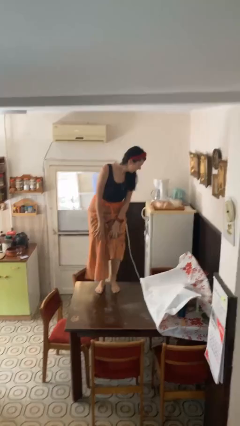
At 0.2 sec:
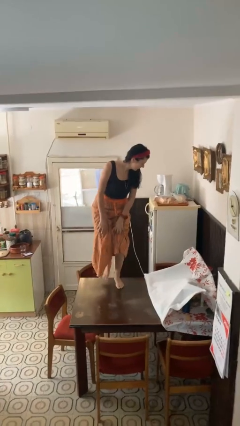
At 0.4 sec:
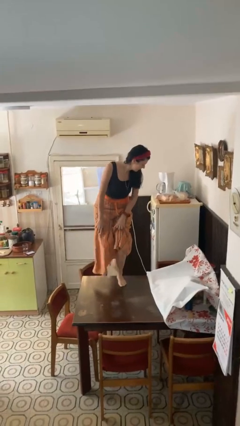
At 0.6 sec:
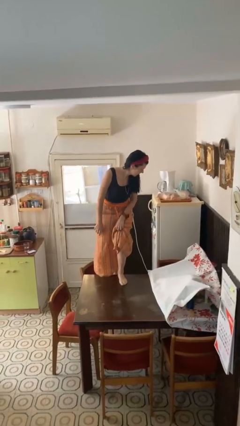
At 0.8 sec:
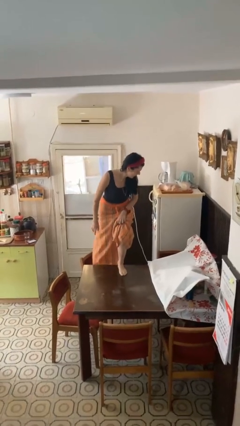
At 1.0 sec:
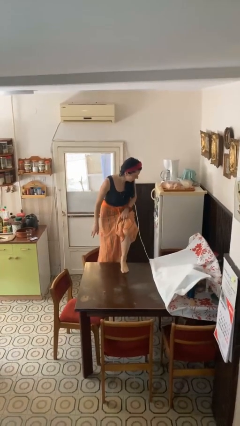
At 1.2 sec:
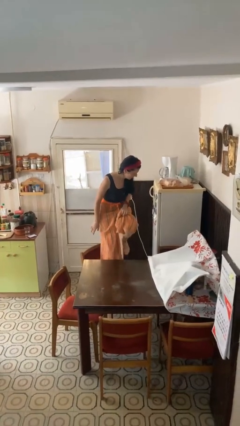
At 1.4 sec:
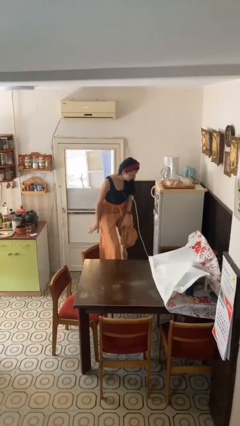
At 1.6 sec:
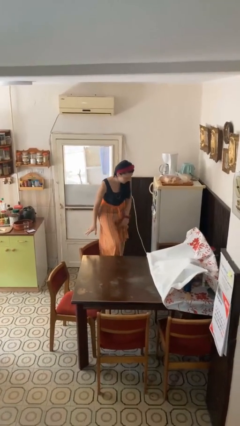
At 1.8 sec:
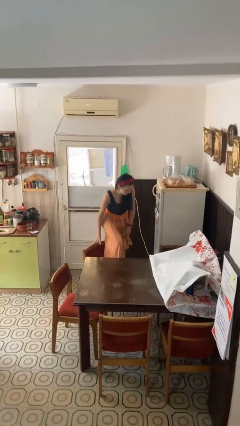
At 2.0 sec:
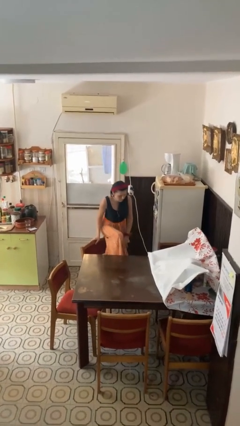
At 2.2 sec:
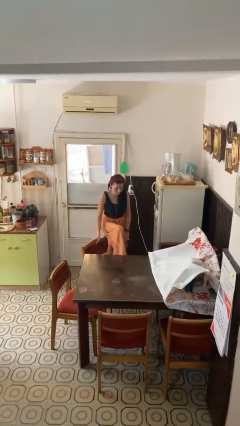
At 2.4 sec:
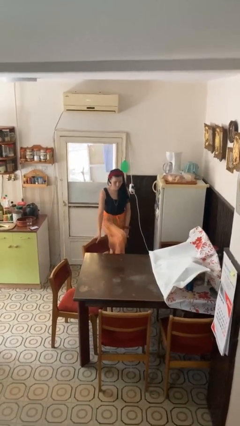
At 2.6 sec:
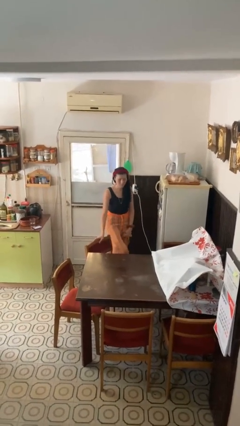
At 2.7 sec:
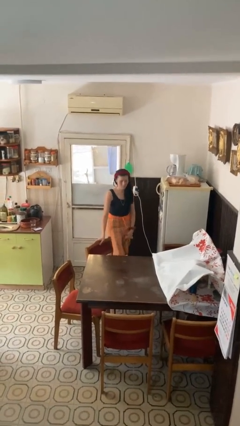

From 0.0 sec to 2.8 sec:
person climbs off table

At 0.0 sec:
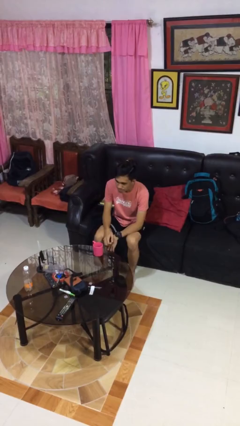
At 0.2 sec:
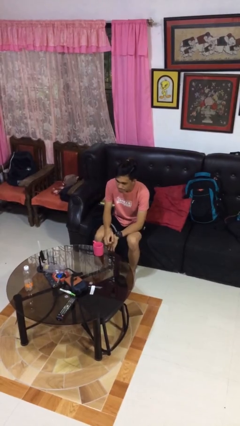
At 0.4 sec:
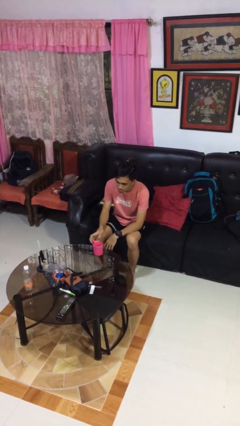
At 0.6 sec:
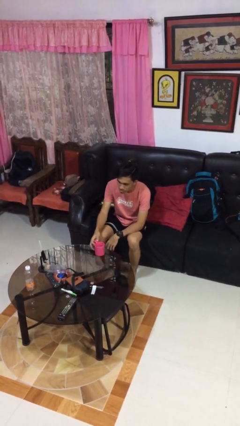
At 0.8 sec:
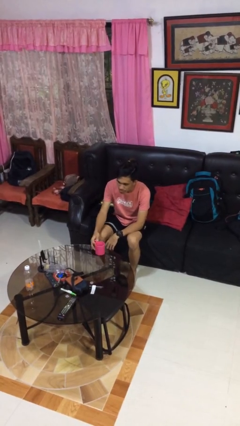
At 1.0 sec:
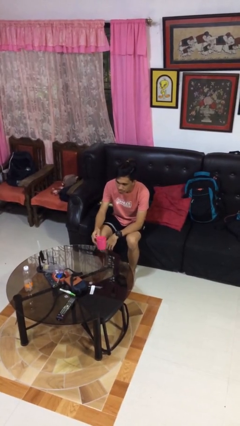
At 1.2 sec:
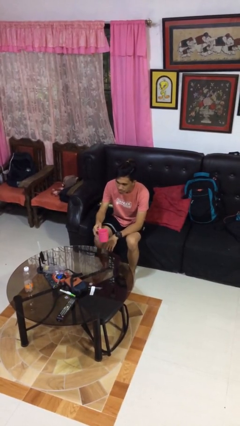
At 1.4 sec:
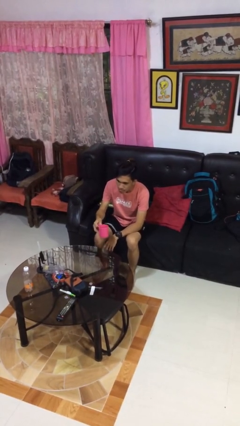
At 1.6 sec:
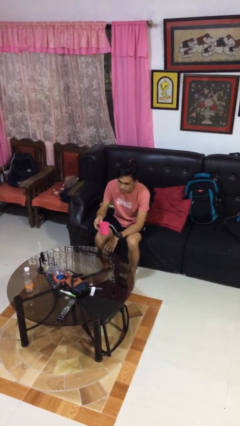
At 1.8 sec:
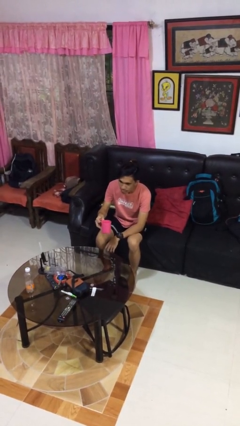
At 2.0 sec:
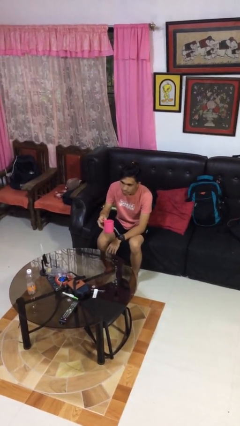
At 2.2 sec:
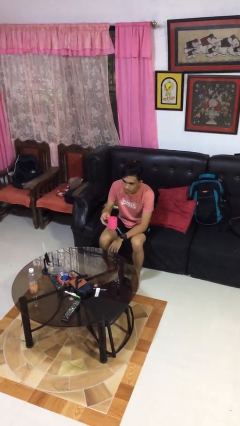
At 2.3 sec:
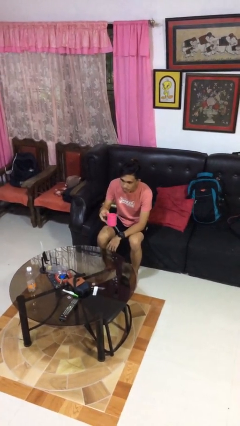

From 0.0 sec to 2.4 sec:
person picks up object from table

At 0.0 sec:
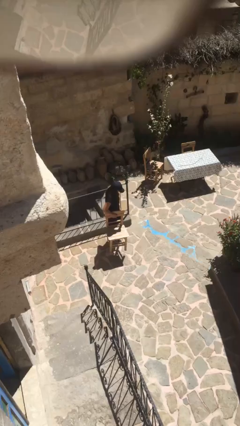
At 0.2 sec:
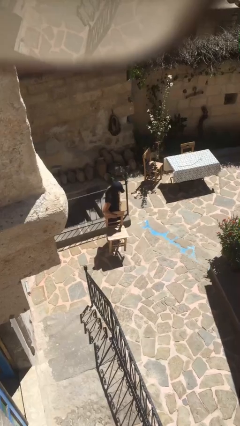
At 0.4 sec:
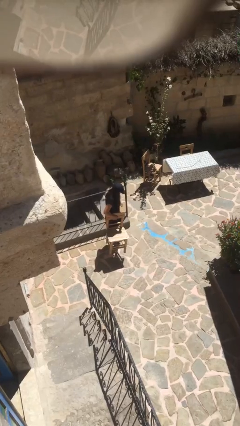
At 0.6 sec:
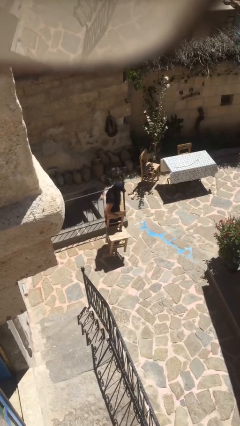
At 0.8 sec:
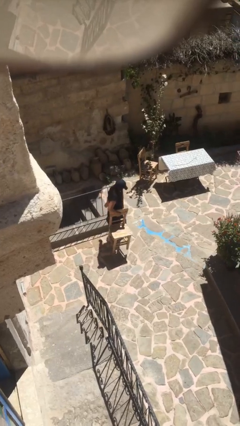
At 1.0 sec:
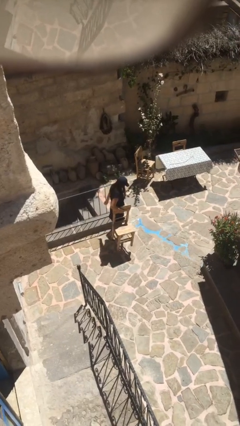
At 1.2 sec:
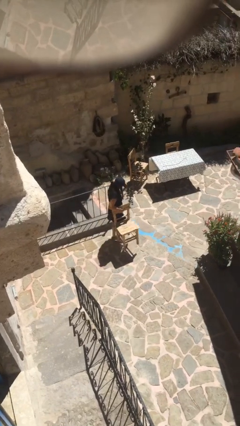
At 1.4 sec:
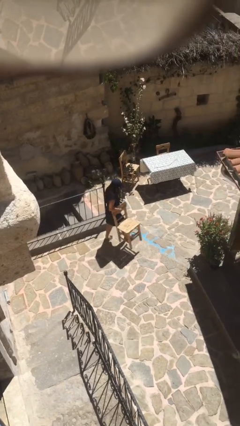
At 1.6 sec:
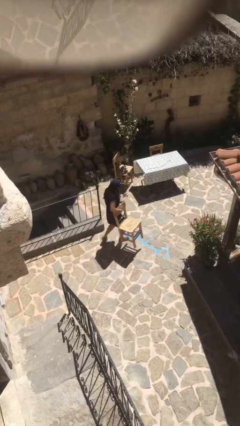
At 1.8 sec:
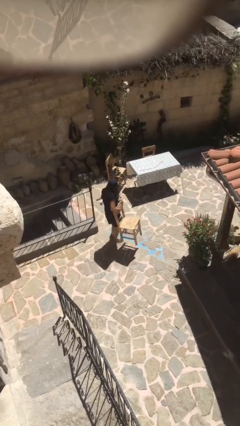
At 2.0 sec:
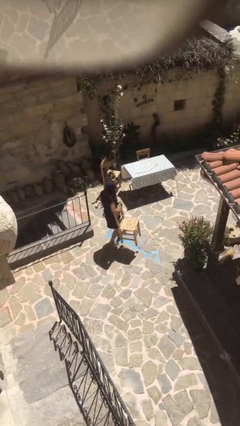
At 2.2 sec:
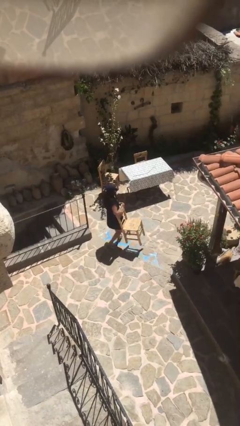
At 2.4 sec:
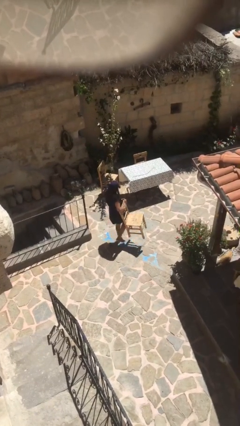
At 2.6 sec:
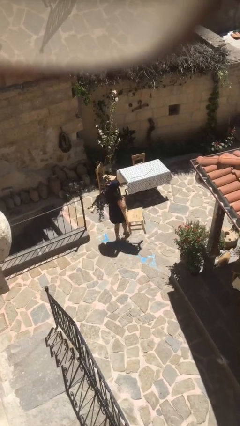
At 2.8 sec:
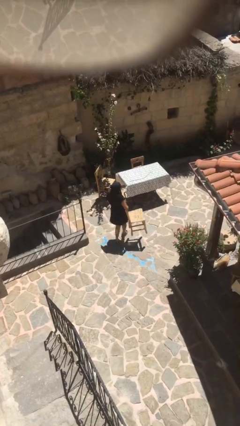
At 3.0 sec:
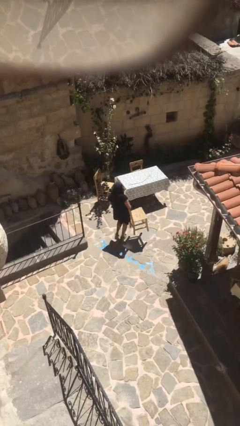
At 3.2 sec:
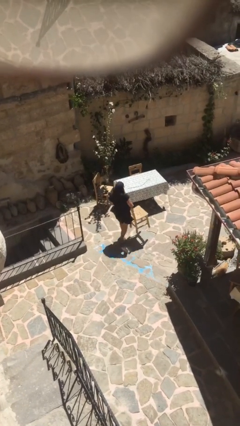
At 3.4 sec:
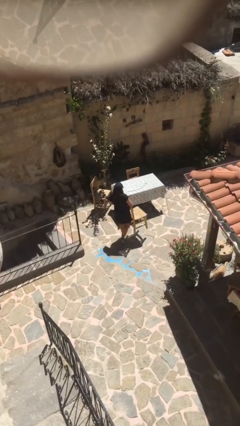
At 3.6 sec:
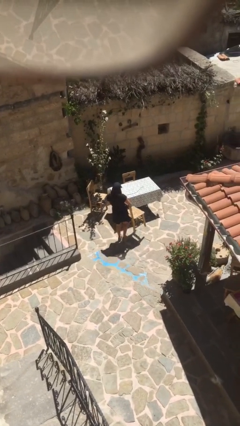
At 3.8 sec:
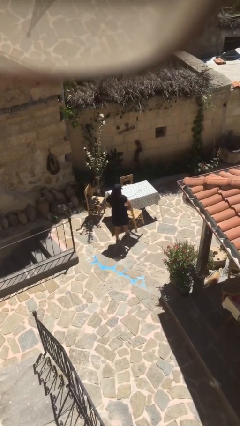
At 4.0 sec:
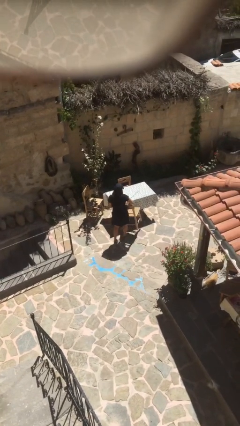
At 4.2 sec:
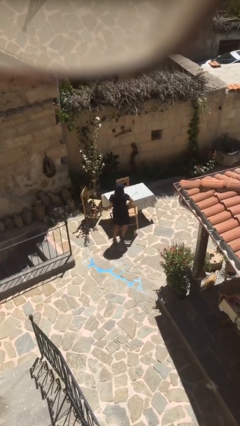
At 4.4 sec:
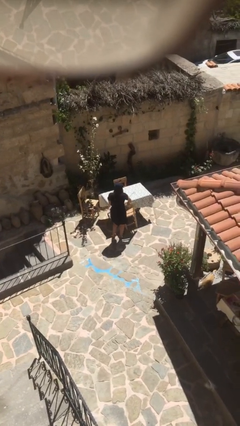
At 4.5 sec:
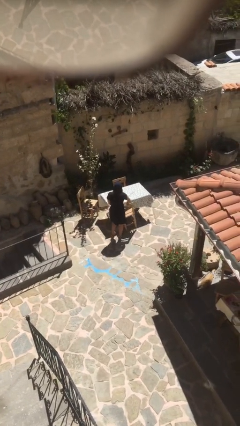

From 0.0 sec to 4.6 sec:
person carries heavy object

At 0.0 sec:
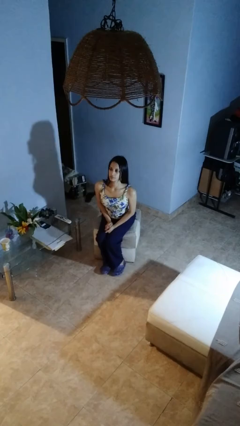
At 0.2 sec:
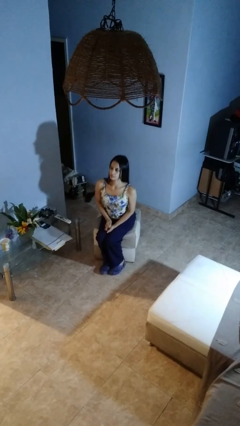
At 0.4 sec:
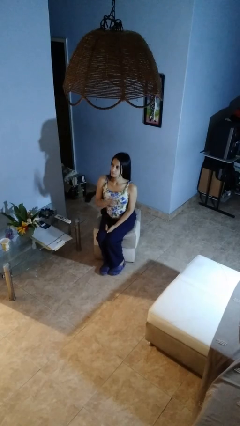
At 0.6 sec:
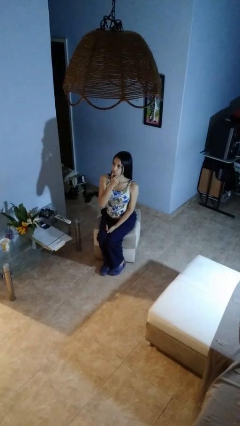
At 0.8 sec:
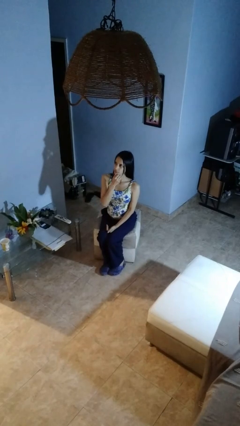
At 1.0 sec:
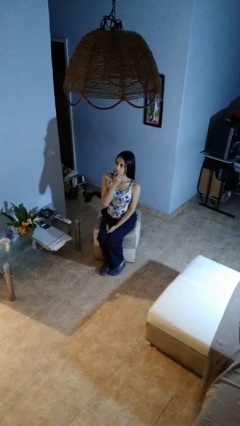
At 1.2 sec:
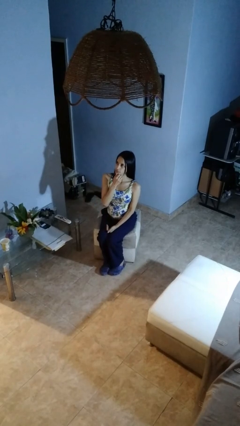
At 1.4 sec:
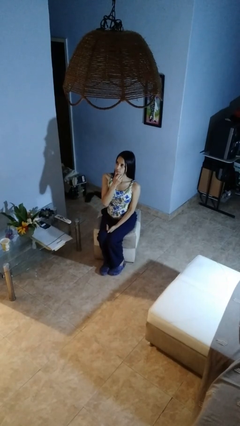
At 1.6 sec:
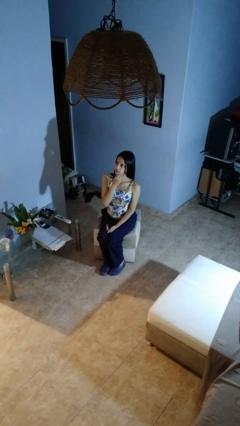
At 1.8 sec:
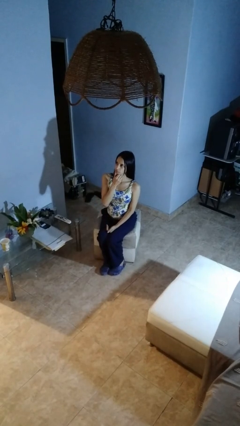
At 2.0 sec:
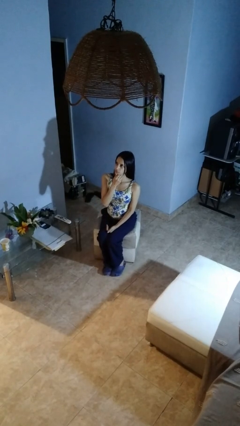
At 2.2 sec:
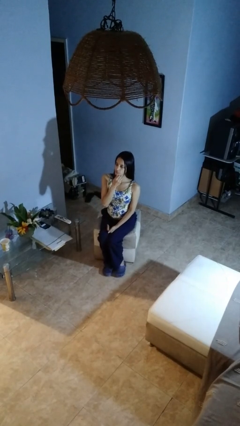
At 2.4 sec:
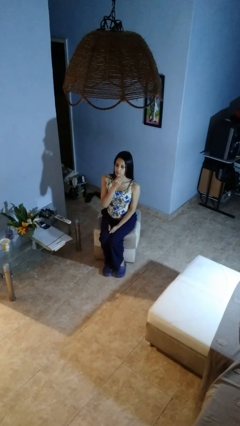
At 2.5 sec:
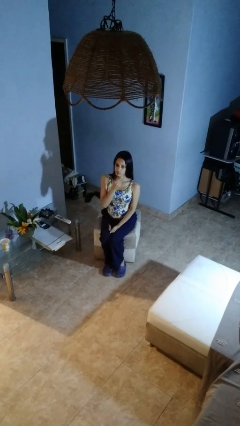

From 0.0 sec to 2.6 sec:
person strokes chin

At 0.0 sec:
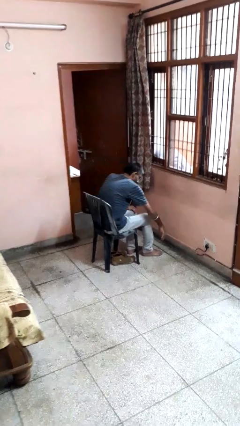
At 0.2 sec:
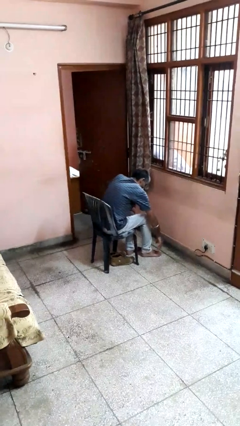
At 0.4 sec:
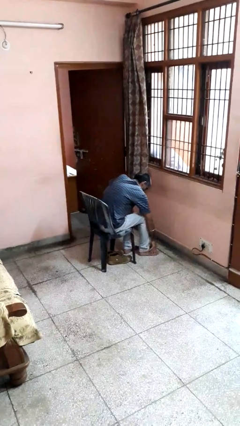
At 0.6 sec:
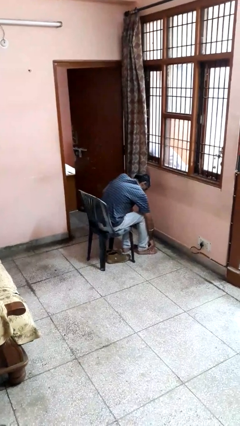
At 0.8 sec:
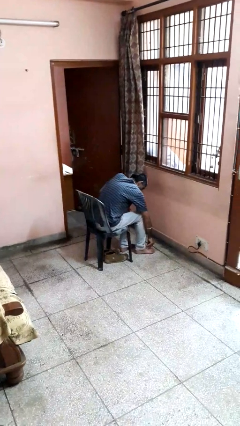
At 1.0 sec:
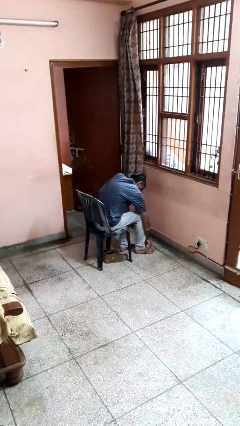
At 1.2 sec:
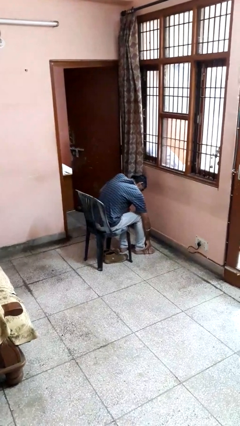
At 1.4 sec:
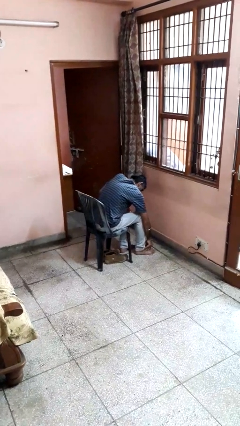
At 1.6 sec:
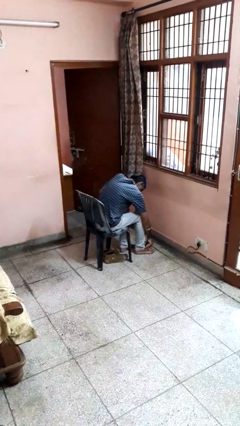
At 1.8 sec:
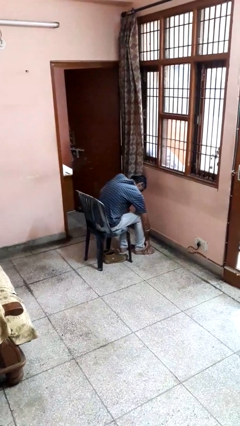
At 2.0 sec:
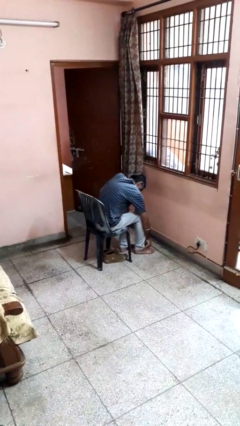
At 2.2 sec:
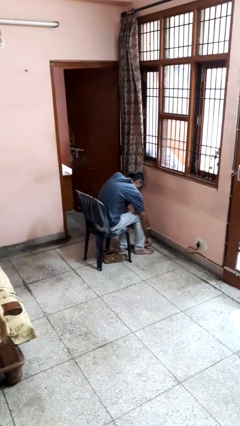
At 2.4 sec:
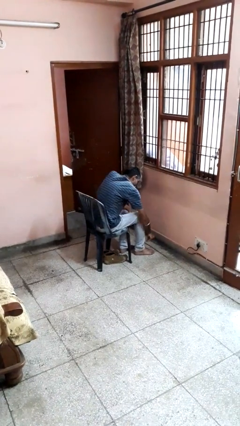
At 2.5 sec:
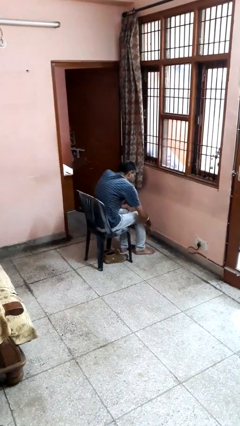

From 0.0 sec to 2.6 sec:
person rubs foot

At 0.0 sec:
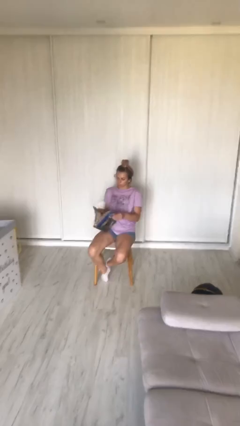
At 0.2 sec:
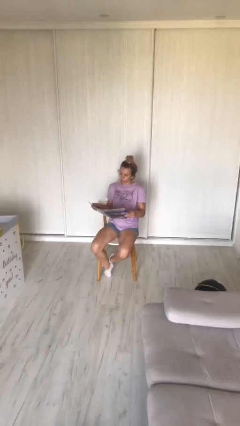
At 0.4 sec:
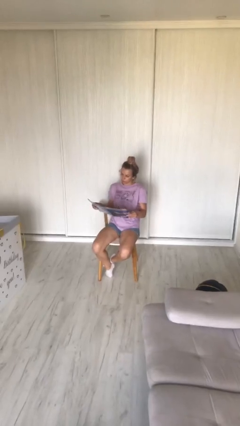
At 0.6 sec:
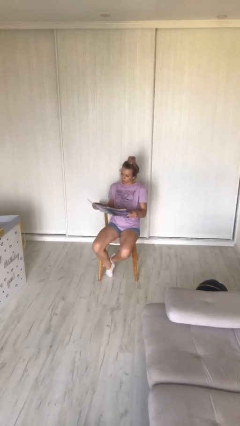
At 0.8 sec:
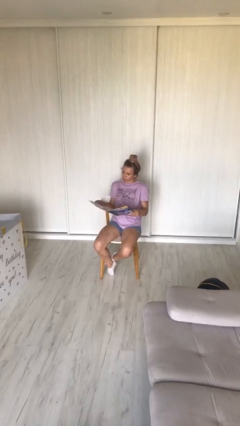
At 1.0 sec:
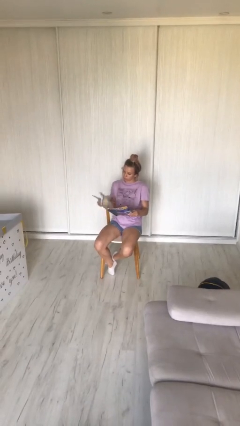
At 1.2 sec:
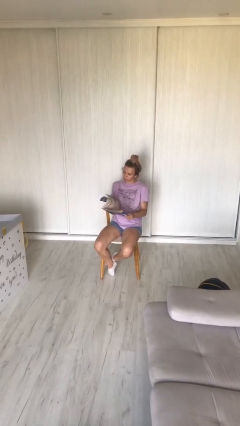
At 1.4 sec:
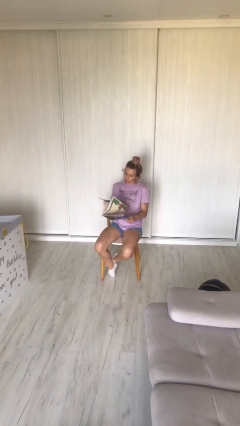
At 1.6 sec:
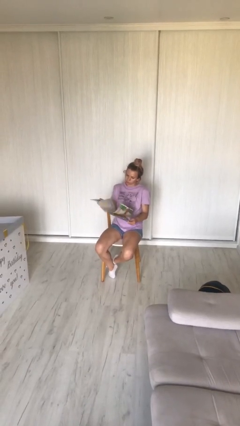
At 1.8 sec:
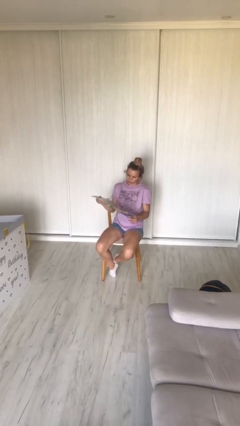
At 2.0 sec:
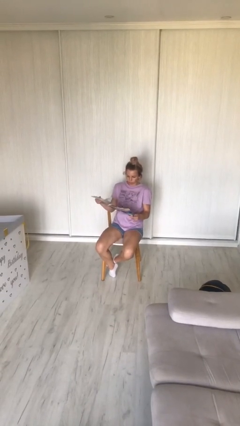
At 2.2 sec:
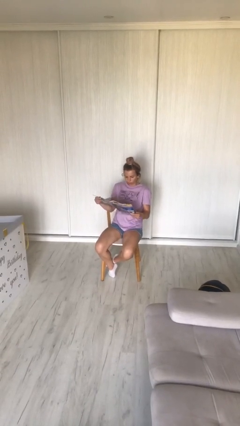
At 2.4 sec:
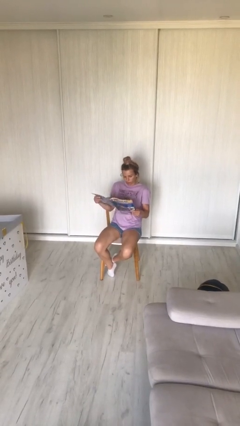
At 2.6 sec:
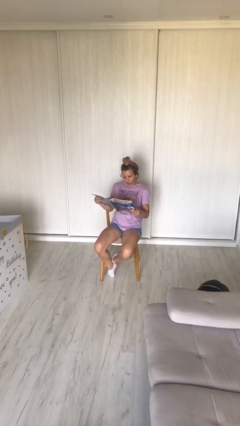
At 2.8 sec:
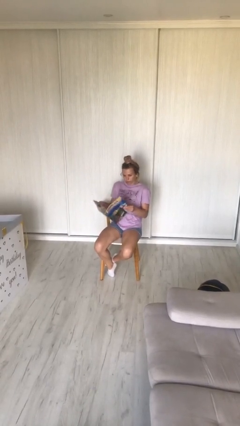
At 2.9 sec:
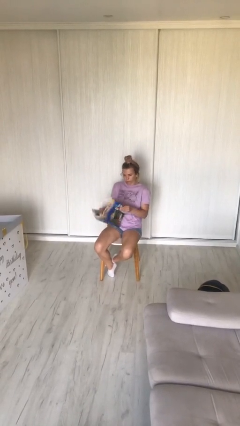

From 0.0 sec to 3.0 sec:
person reads magazine
